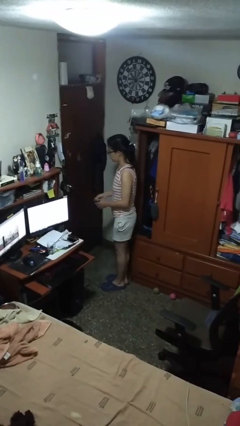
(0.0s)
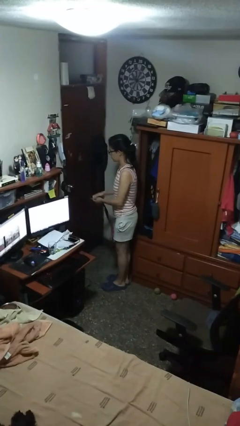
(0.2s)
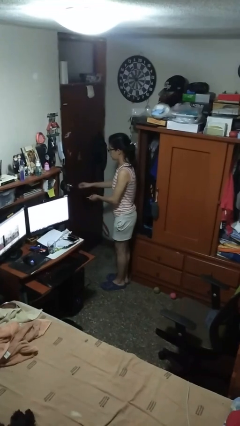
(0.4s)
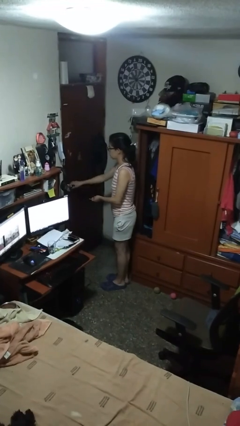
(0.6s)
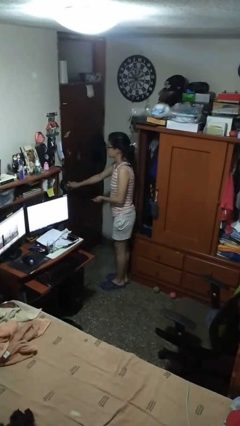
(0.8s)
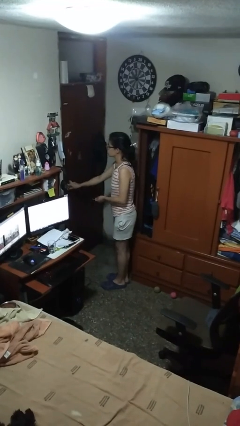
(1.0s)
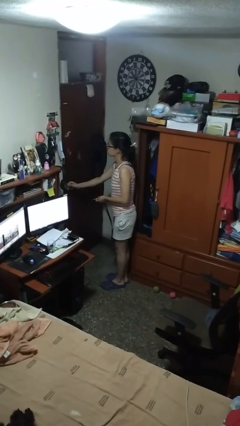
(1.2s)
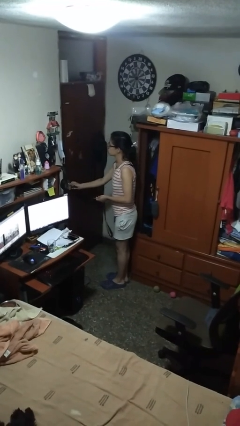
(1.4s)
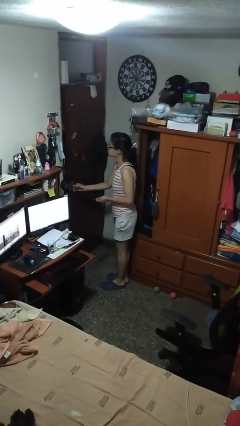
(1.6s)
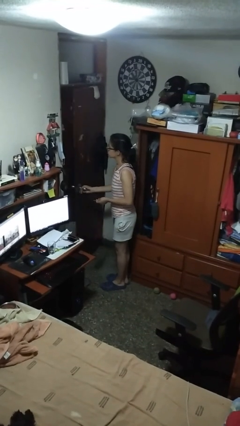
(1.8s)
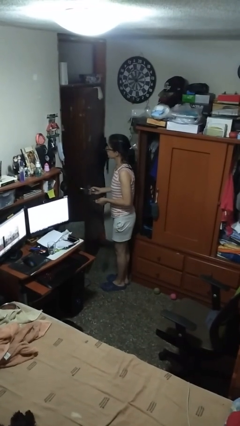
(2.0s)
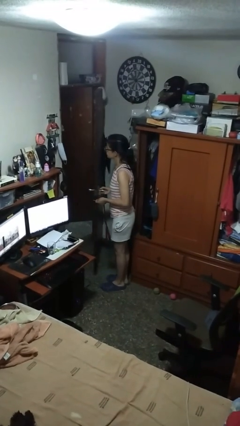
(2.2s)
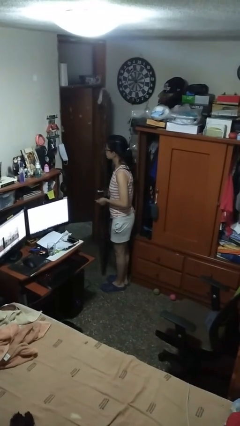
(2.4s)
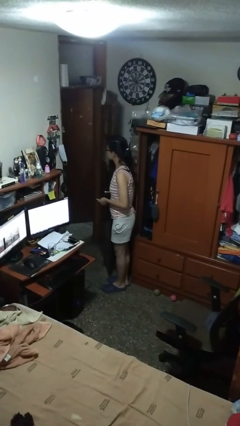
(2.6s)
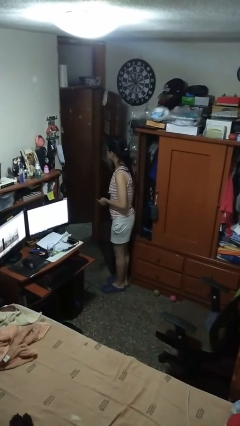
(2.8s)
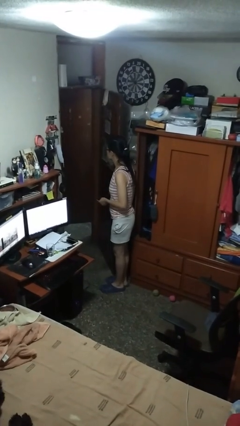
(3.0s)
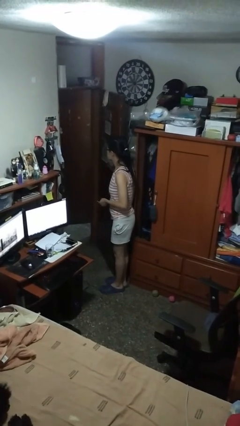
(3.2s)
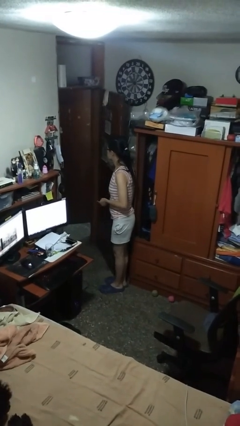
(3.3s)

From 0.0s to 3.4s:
person opens facility door

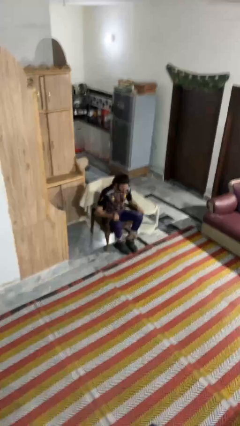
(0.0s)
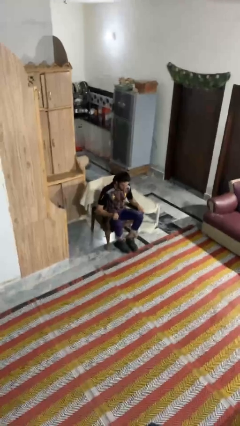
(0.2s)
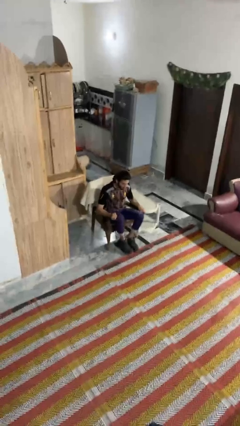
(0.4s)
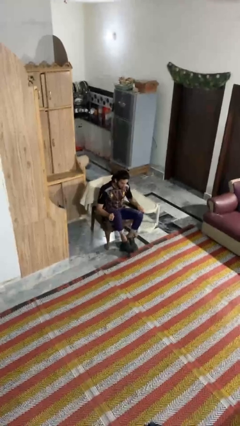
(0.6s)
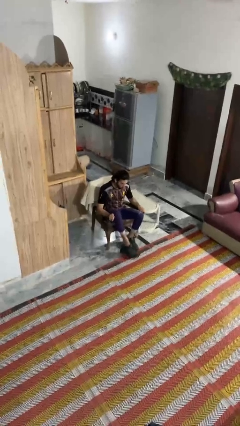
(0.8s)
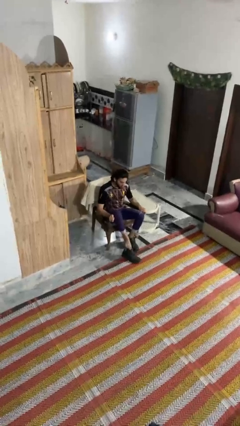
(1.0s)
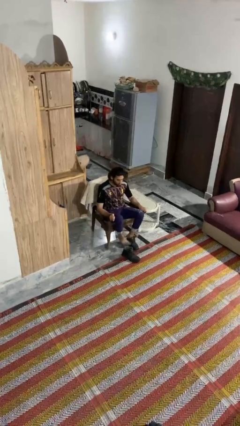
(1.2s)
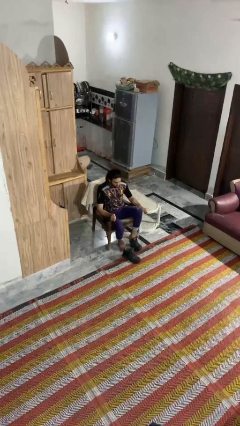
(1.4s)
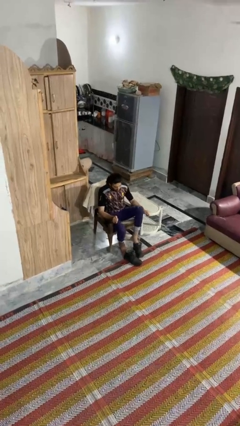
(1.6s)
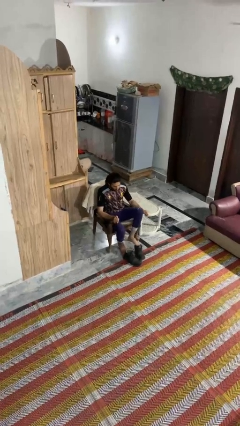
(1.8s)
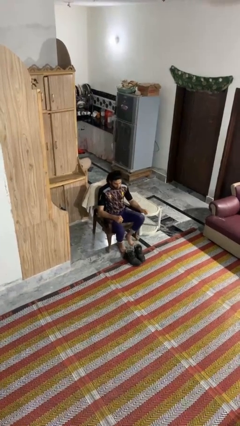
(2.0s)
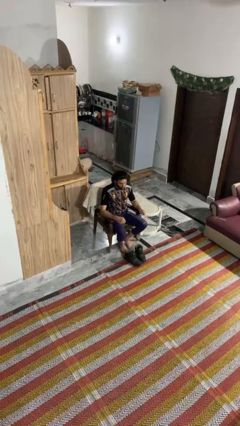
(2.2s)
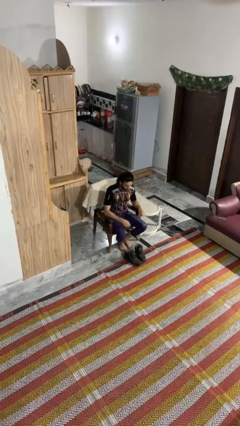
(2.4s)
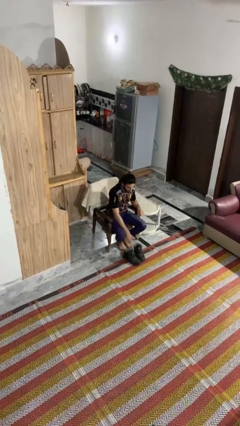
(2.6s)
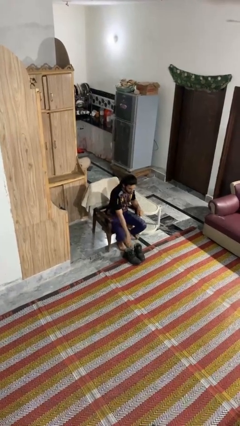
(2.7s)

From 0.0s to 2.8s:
person takes off boots

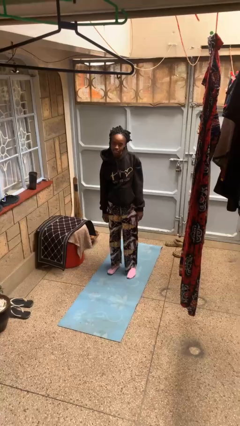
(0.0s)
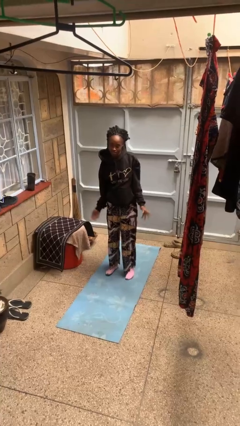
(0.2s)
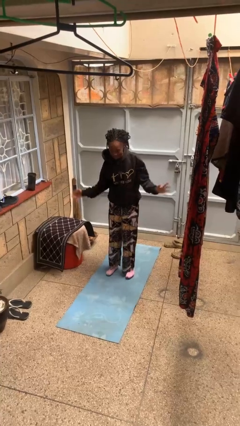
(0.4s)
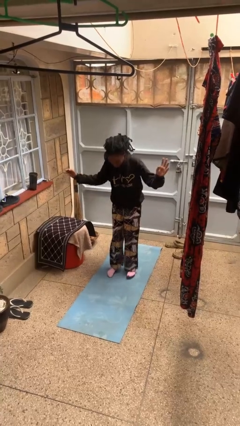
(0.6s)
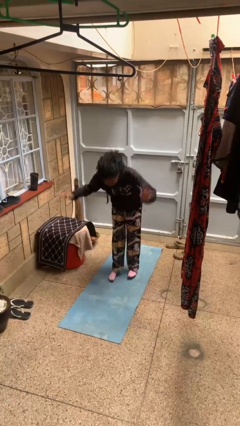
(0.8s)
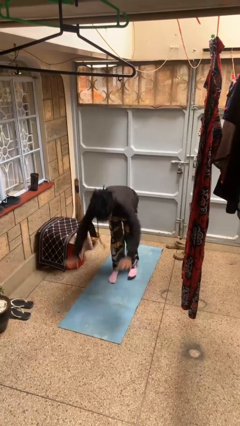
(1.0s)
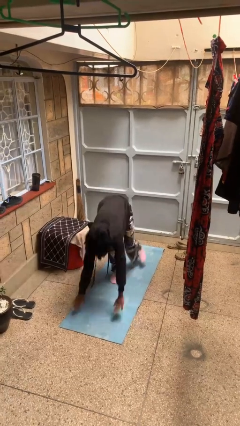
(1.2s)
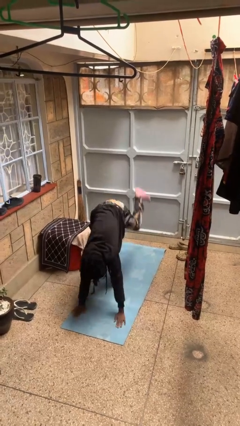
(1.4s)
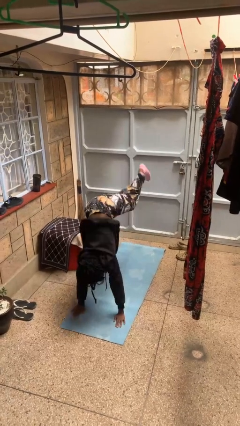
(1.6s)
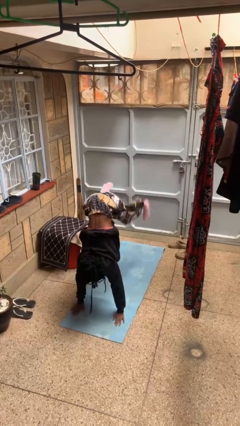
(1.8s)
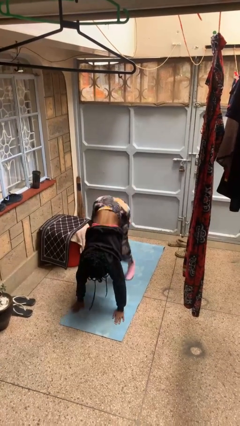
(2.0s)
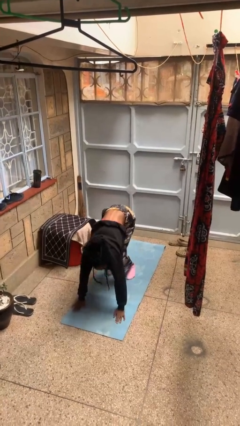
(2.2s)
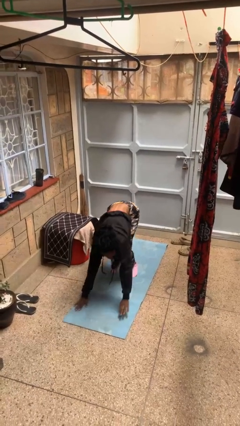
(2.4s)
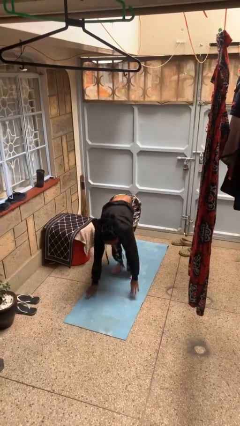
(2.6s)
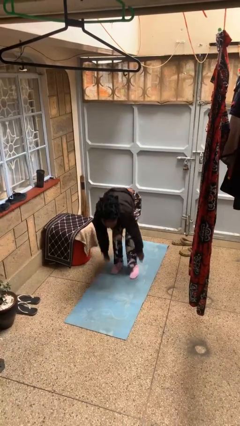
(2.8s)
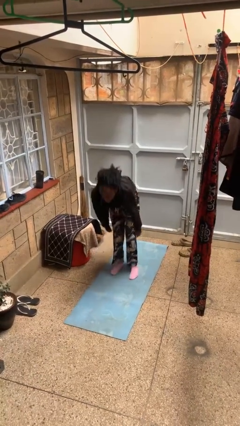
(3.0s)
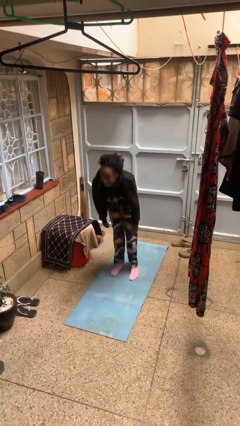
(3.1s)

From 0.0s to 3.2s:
person handstand

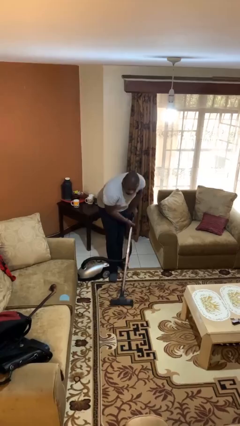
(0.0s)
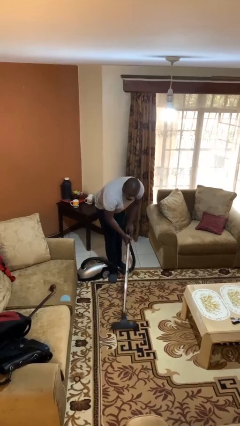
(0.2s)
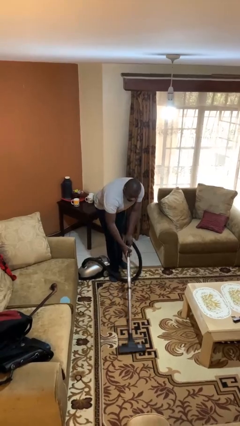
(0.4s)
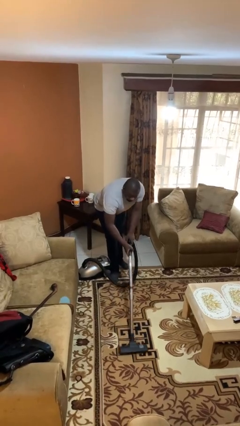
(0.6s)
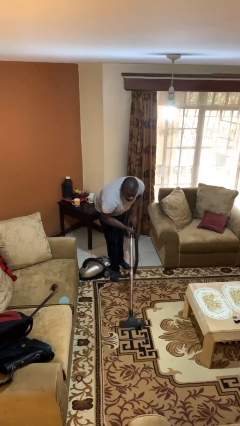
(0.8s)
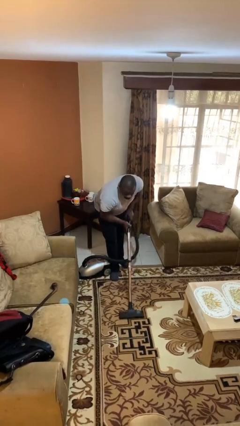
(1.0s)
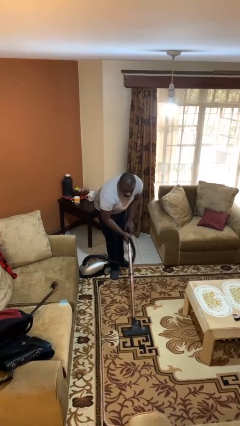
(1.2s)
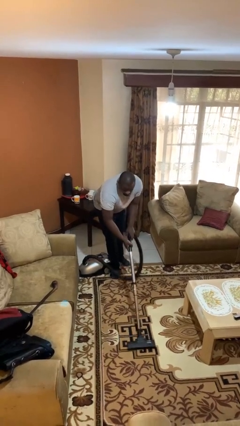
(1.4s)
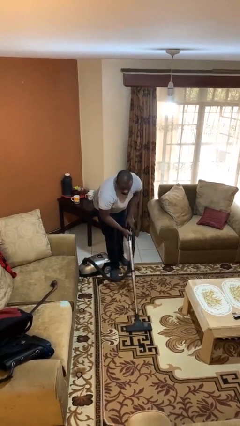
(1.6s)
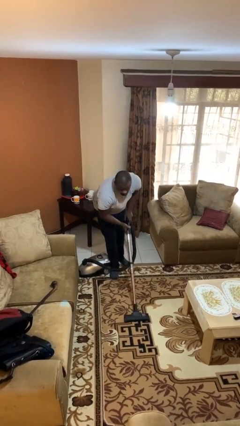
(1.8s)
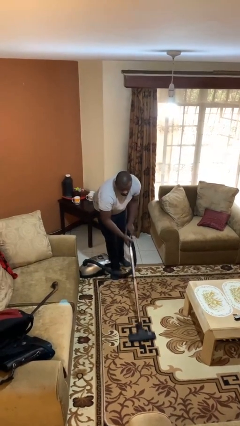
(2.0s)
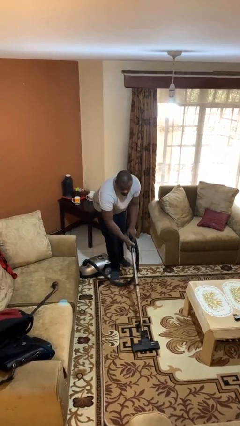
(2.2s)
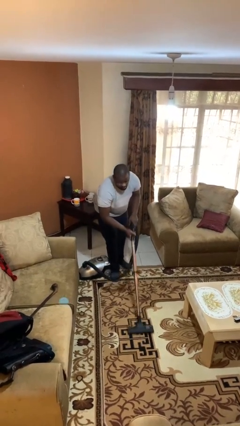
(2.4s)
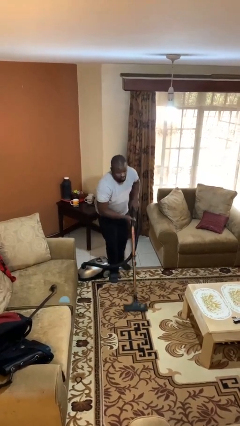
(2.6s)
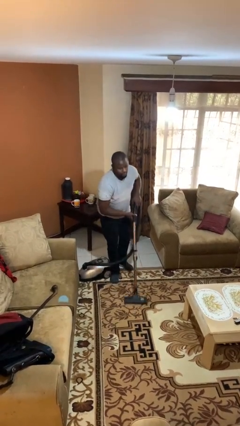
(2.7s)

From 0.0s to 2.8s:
person vacuums carpet

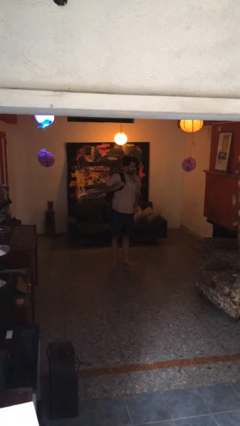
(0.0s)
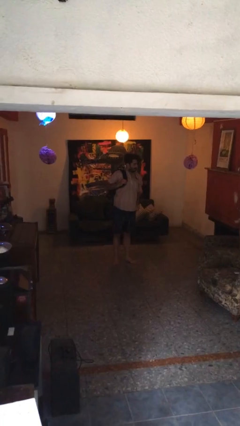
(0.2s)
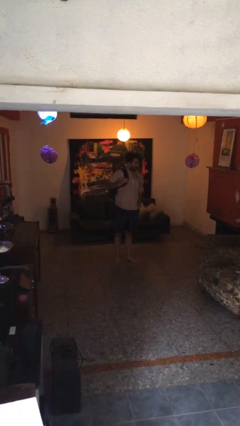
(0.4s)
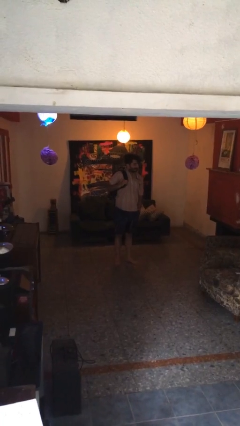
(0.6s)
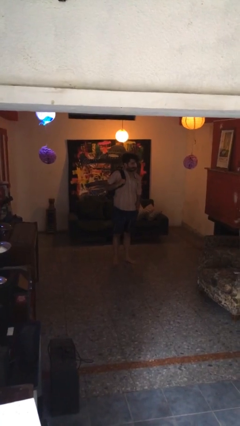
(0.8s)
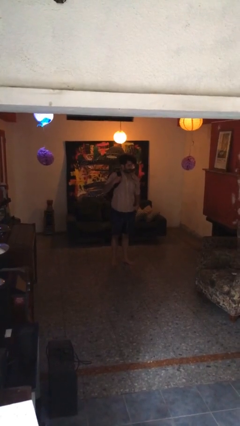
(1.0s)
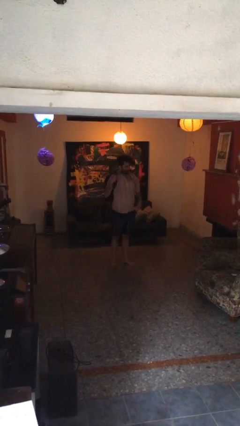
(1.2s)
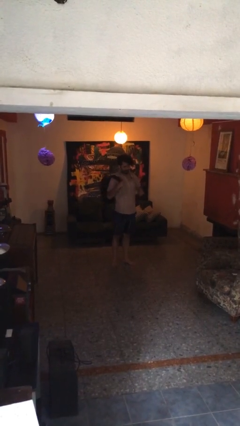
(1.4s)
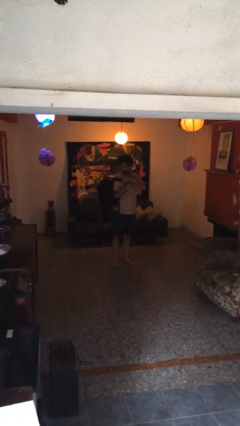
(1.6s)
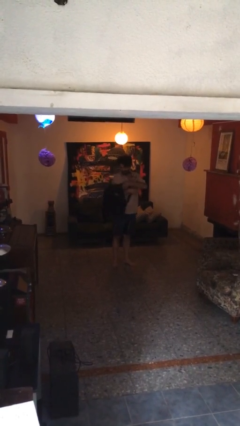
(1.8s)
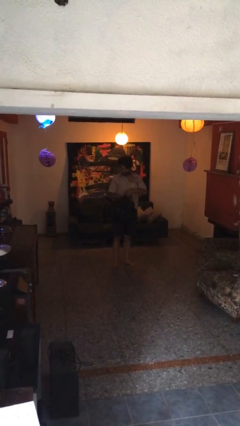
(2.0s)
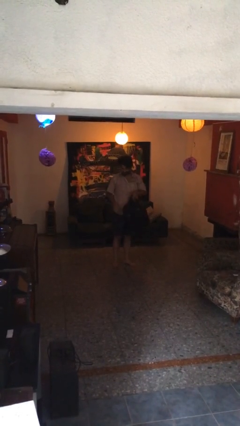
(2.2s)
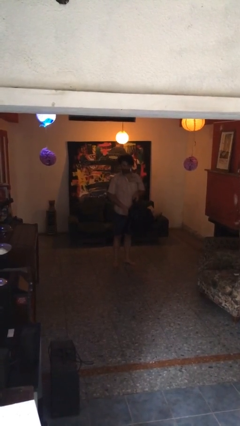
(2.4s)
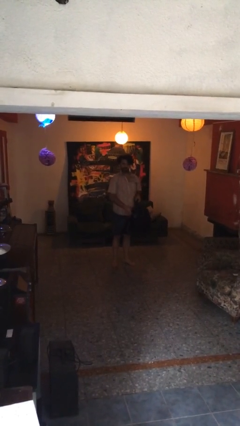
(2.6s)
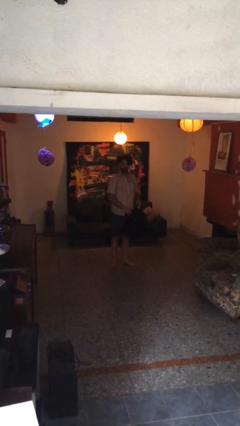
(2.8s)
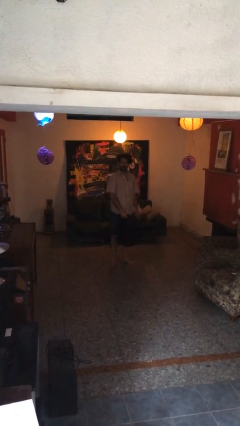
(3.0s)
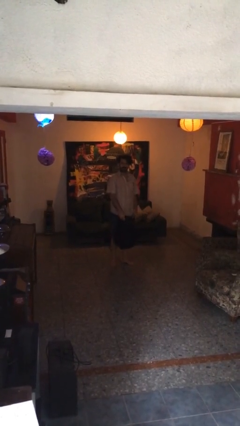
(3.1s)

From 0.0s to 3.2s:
person takes off backpack

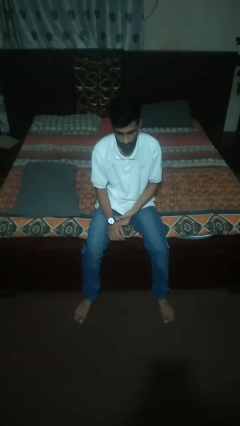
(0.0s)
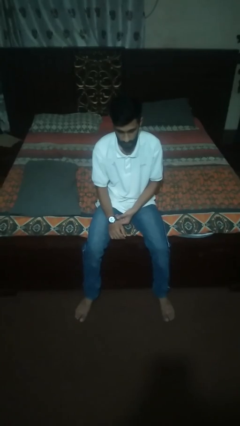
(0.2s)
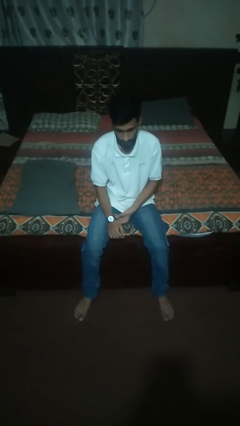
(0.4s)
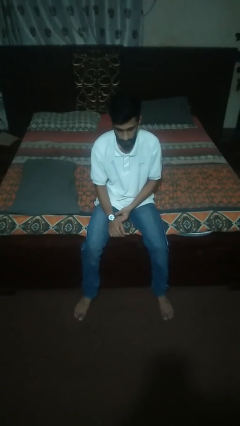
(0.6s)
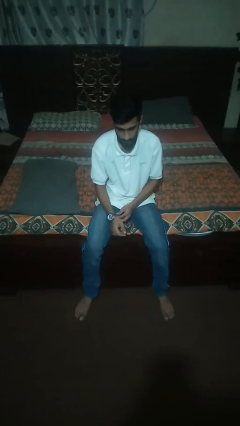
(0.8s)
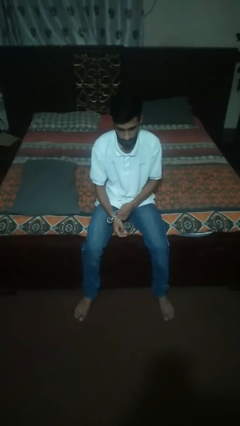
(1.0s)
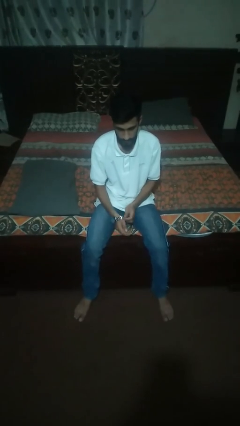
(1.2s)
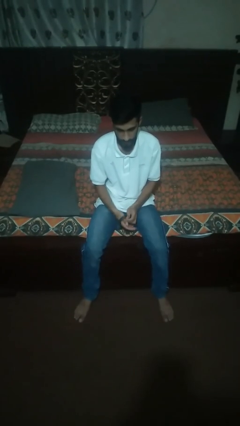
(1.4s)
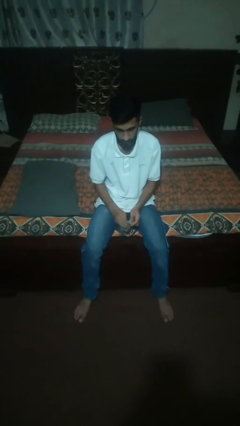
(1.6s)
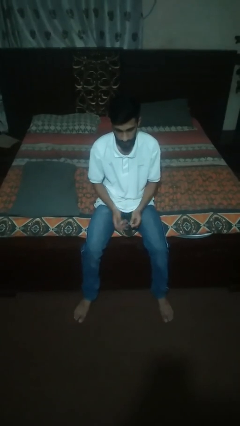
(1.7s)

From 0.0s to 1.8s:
person takes off wristwatch

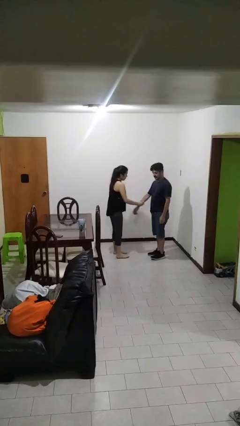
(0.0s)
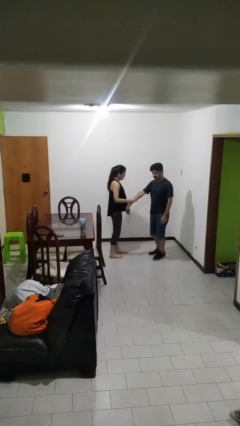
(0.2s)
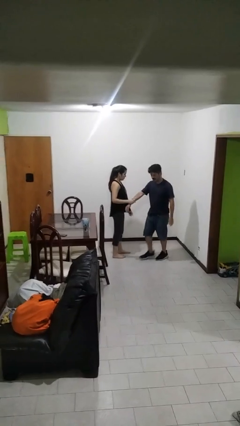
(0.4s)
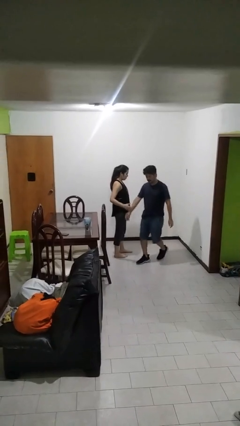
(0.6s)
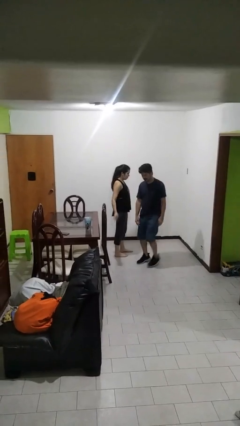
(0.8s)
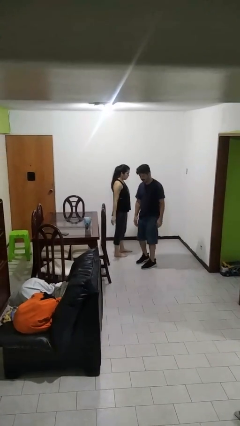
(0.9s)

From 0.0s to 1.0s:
person grabs person by forearm
